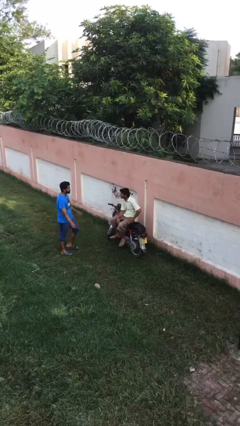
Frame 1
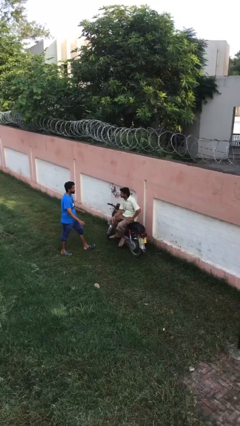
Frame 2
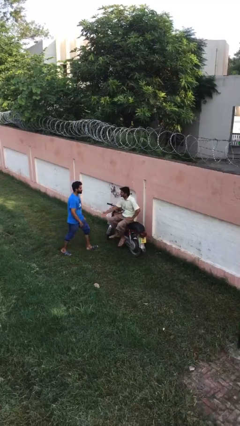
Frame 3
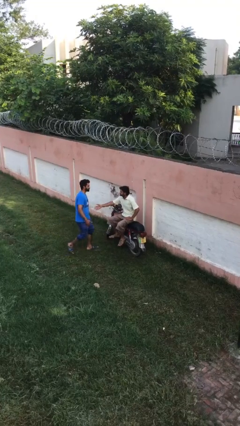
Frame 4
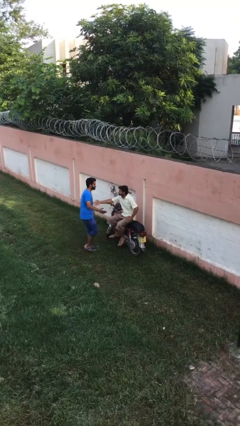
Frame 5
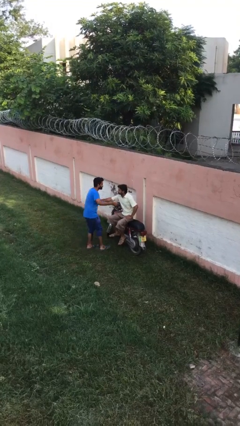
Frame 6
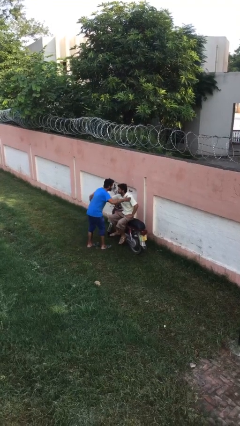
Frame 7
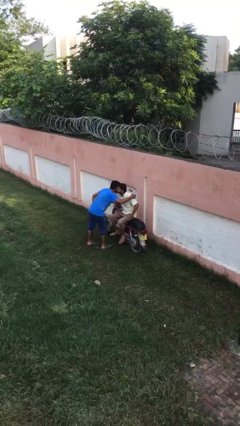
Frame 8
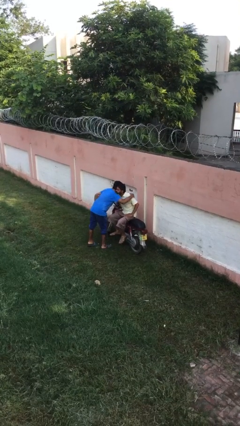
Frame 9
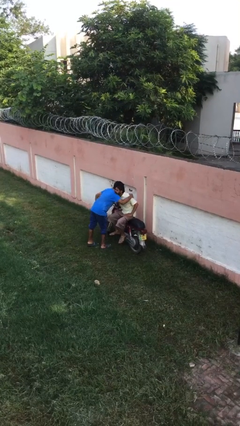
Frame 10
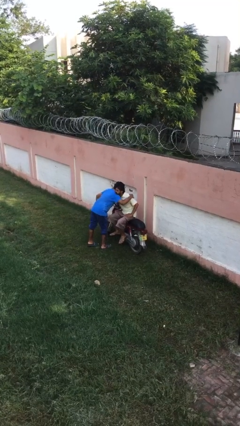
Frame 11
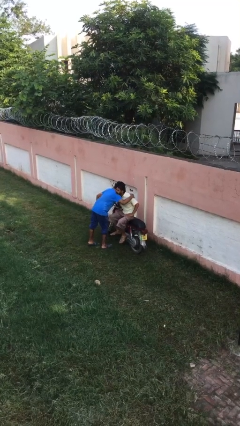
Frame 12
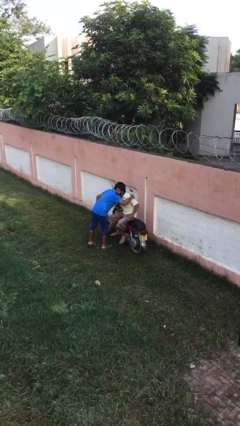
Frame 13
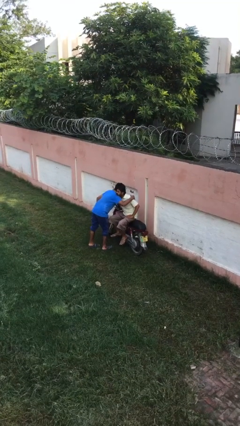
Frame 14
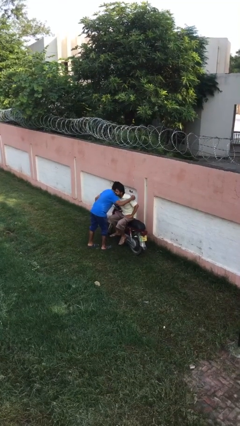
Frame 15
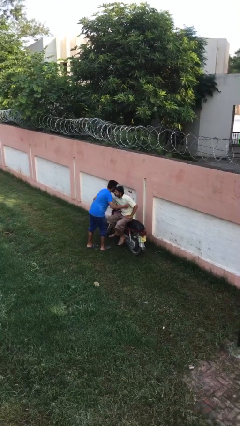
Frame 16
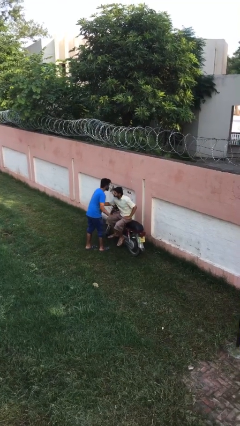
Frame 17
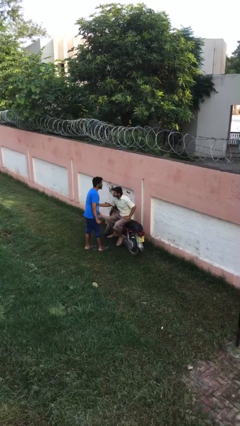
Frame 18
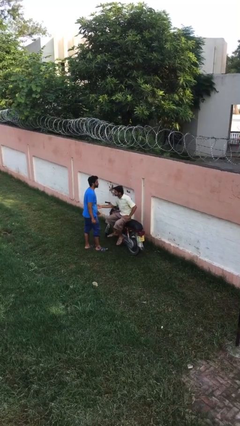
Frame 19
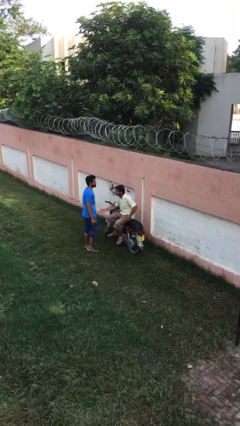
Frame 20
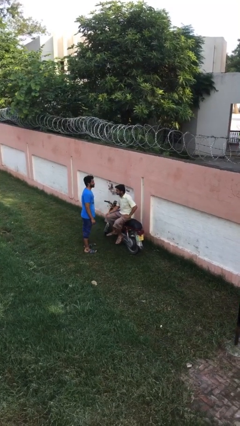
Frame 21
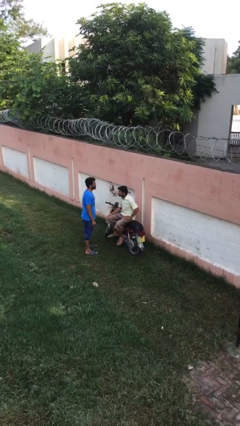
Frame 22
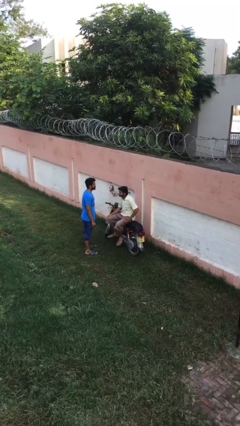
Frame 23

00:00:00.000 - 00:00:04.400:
person embraces person

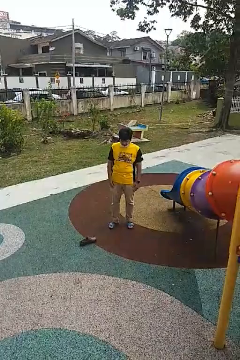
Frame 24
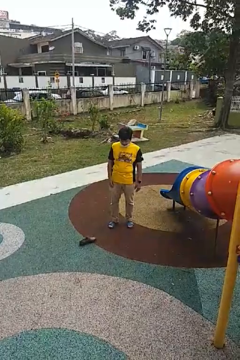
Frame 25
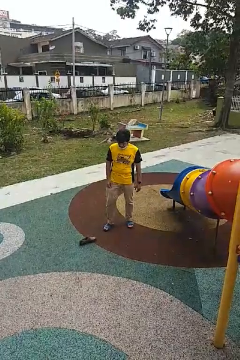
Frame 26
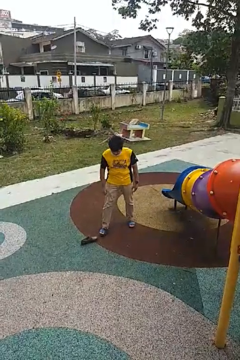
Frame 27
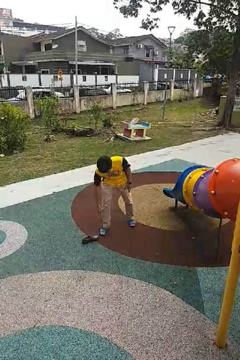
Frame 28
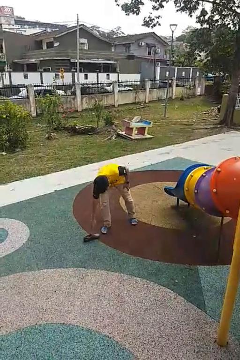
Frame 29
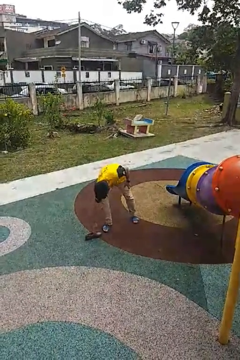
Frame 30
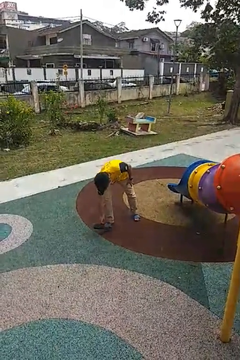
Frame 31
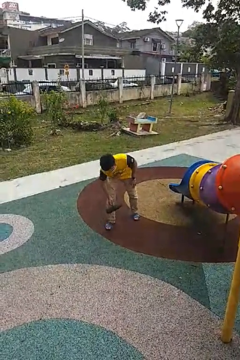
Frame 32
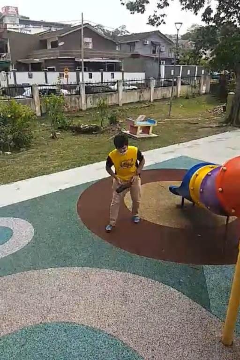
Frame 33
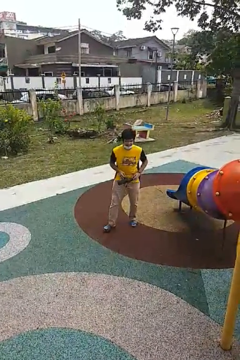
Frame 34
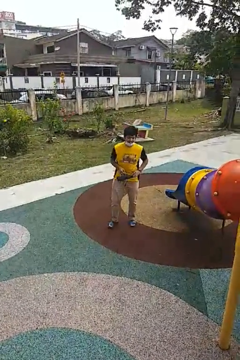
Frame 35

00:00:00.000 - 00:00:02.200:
person picks up object from floor

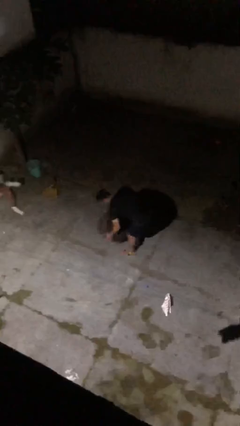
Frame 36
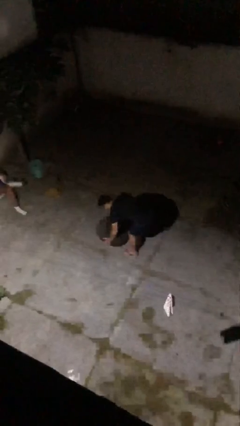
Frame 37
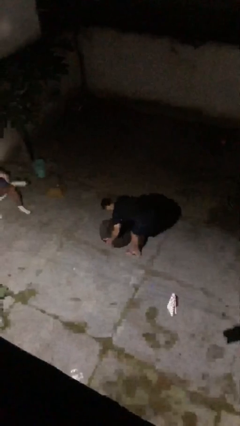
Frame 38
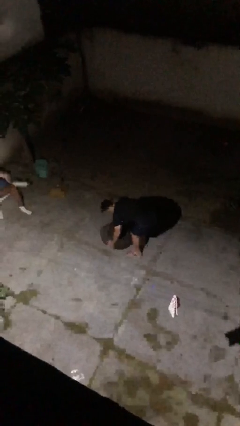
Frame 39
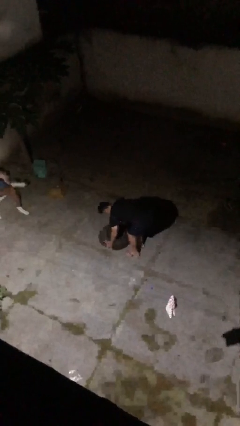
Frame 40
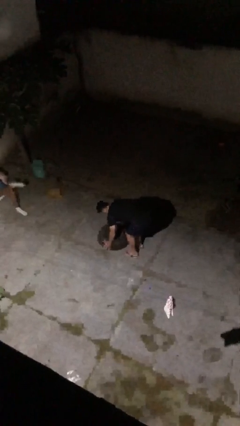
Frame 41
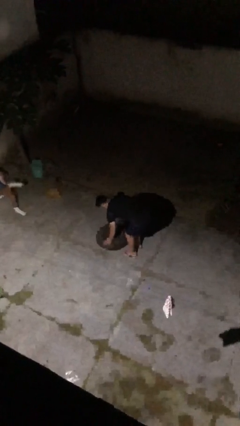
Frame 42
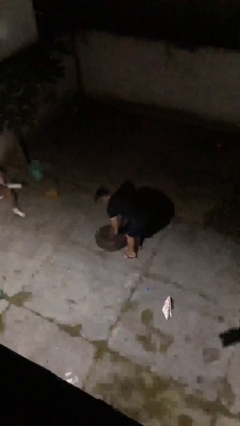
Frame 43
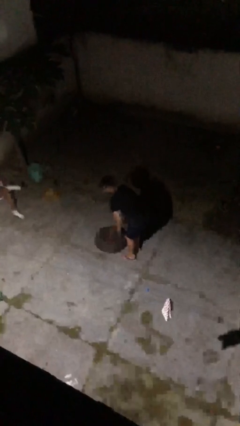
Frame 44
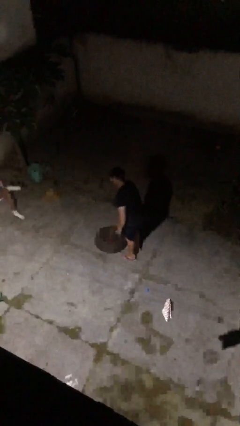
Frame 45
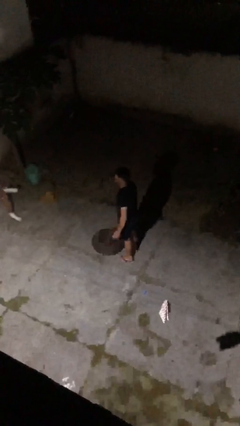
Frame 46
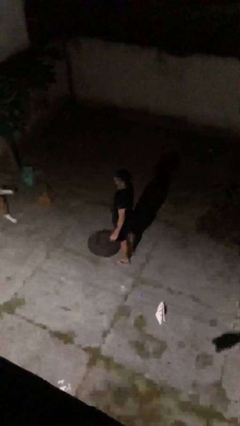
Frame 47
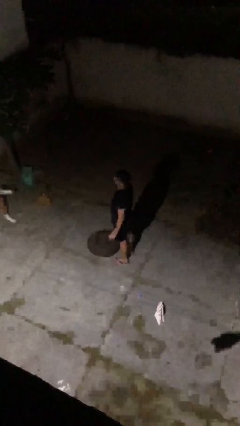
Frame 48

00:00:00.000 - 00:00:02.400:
person puts down object on floor

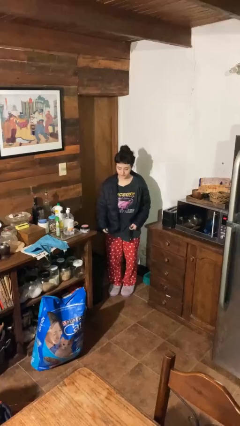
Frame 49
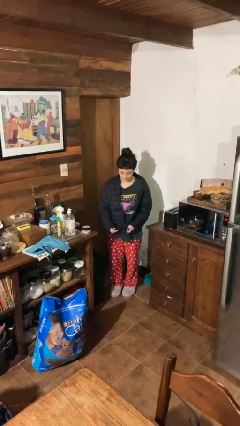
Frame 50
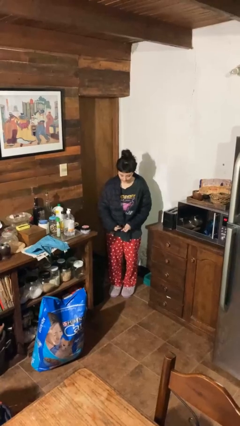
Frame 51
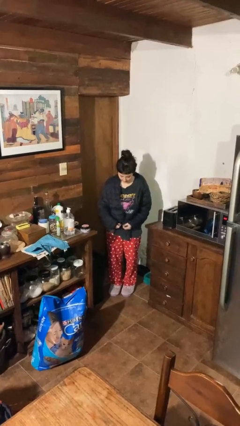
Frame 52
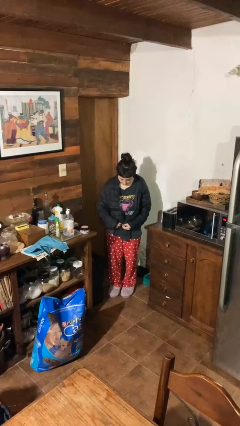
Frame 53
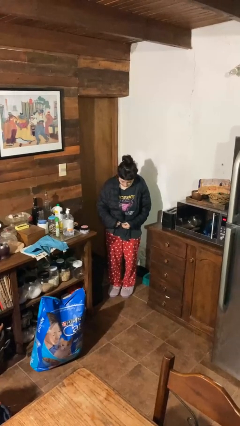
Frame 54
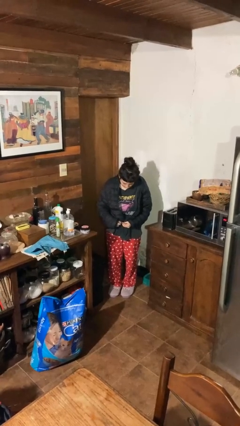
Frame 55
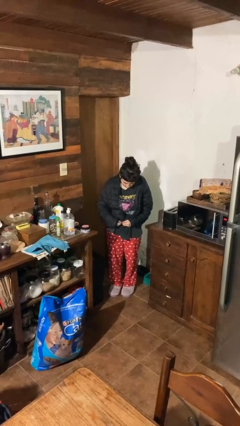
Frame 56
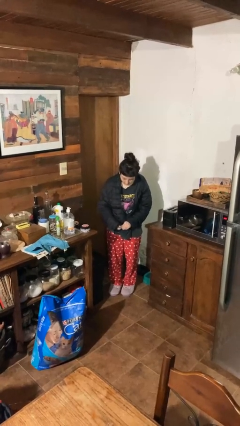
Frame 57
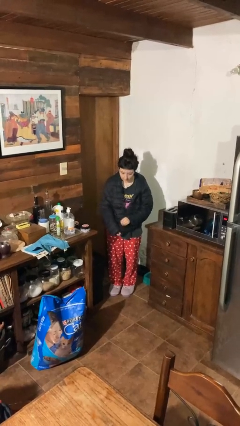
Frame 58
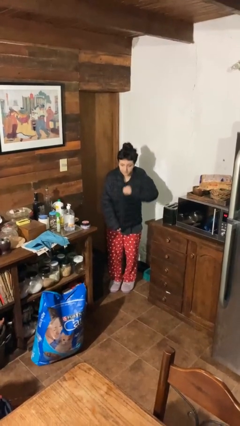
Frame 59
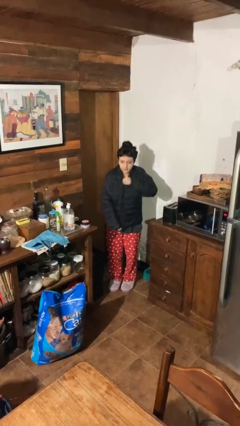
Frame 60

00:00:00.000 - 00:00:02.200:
person zips up jacket

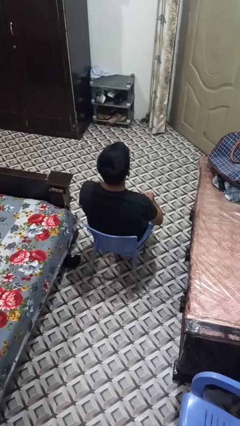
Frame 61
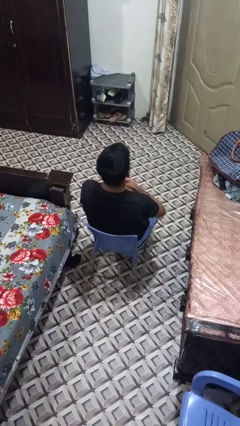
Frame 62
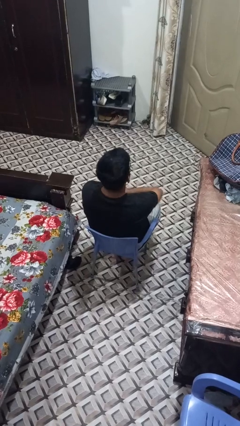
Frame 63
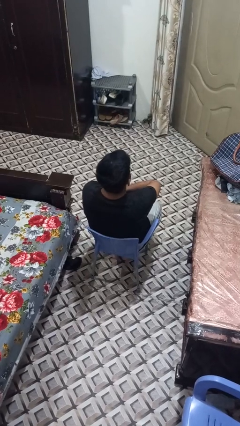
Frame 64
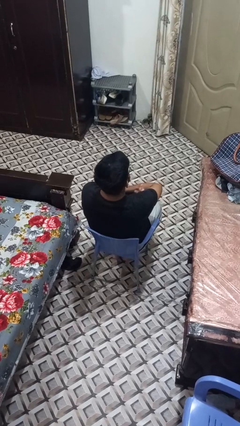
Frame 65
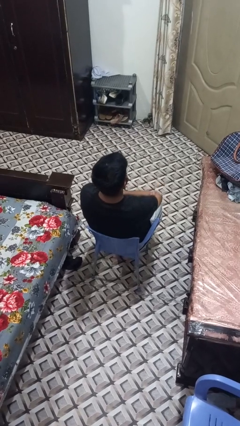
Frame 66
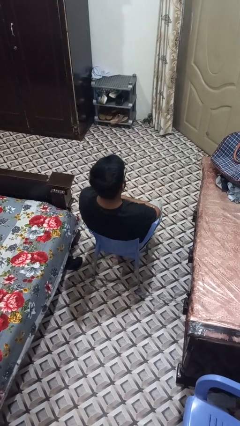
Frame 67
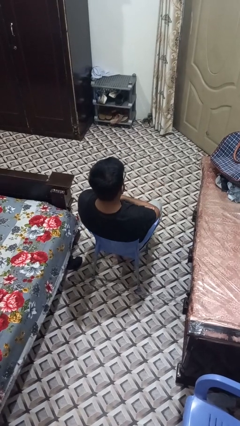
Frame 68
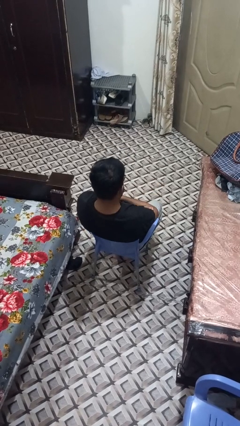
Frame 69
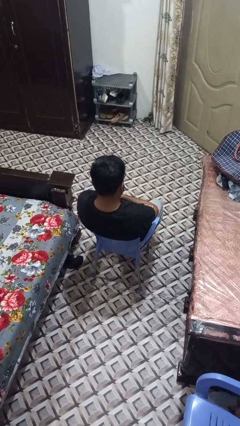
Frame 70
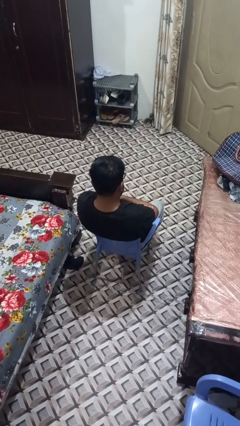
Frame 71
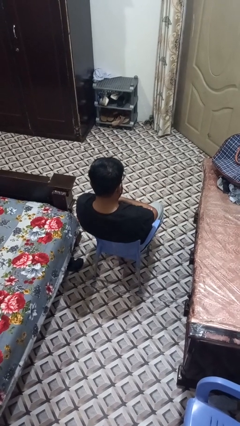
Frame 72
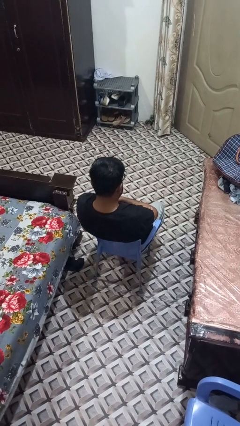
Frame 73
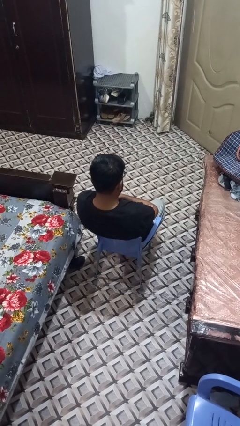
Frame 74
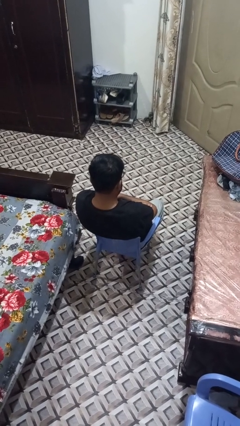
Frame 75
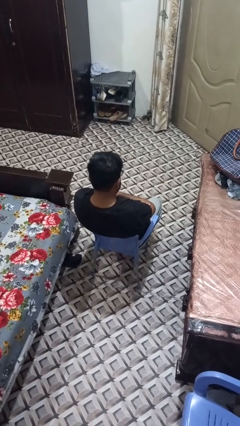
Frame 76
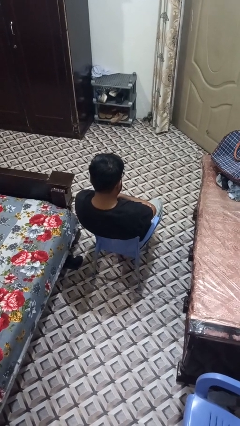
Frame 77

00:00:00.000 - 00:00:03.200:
person crosses arms

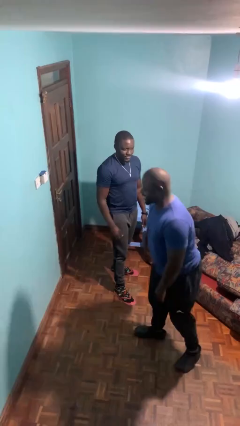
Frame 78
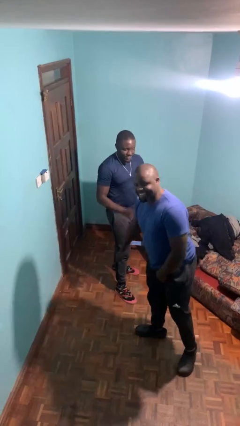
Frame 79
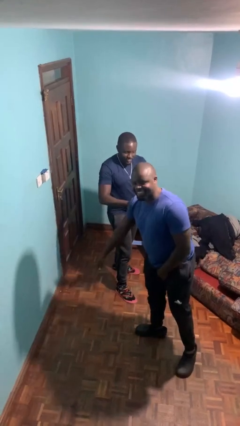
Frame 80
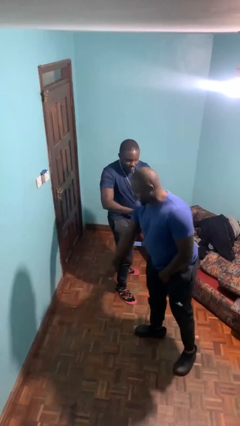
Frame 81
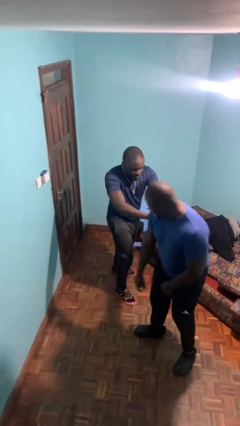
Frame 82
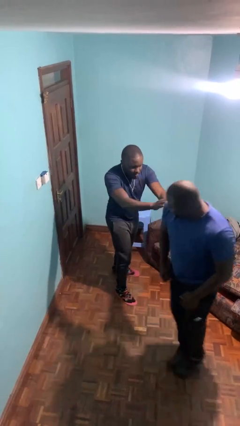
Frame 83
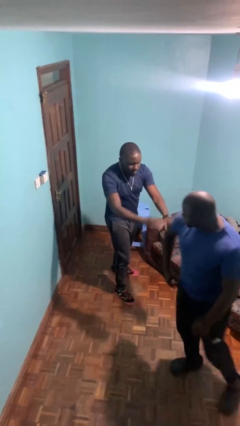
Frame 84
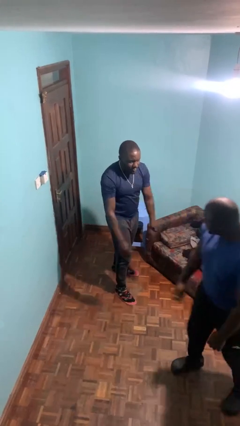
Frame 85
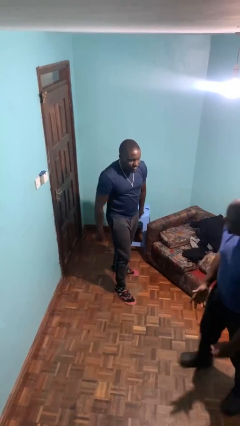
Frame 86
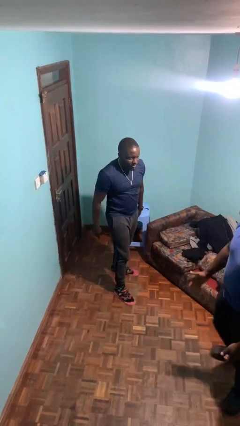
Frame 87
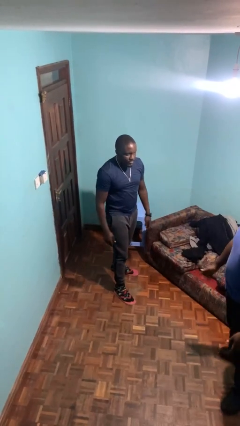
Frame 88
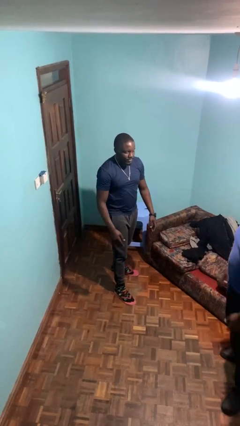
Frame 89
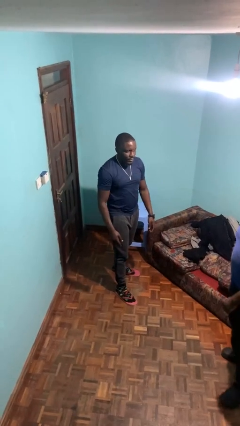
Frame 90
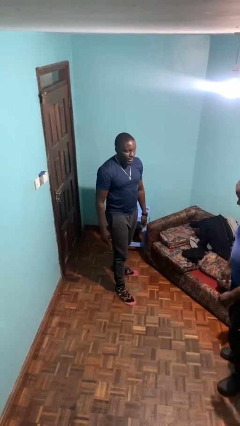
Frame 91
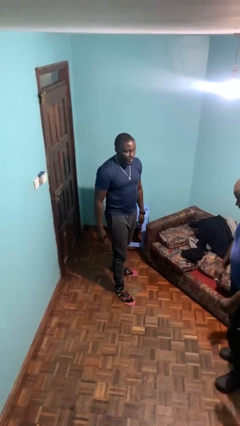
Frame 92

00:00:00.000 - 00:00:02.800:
person shoves person

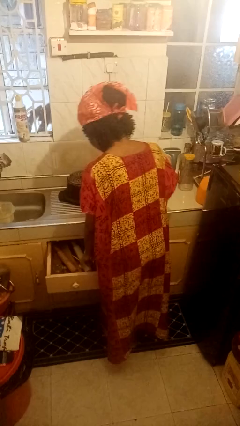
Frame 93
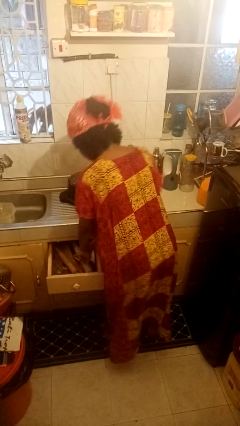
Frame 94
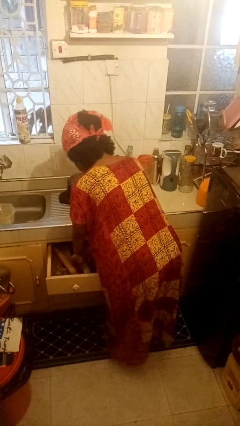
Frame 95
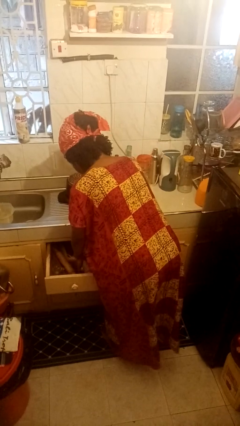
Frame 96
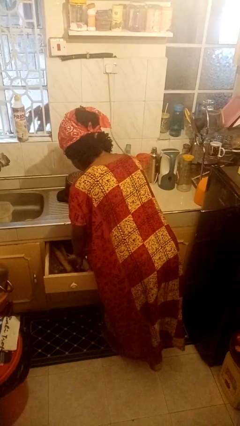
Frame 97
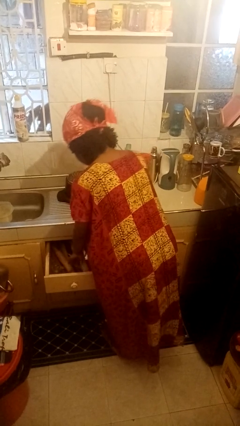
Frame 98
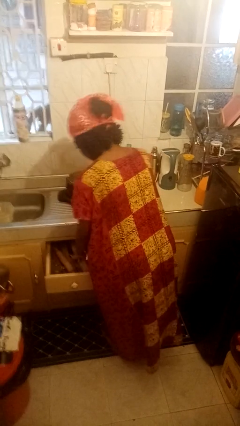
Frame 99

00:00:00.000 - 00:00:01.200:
person searches in kitchen drawer
